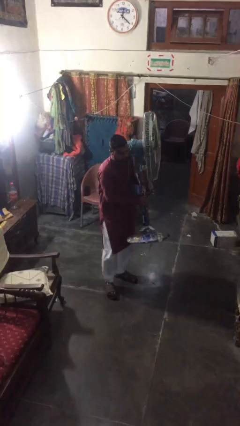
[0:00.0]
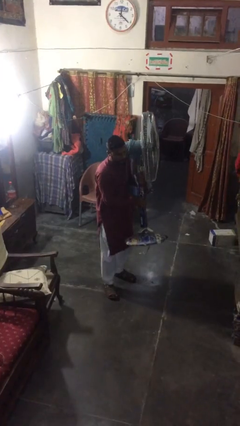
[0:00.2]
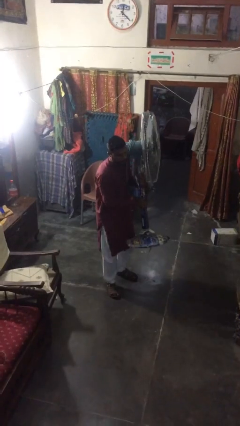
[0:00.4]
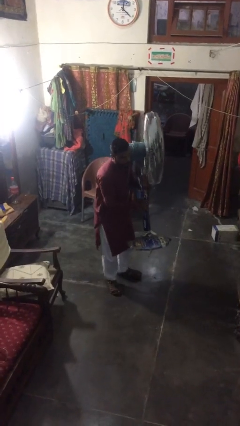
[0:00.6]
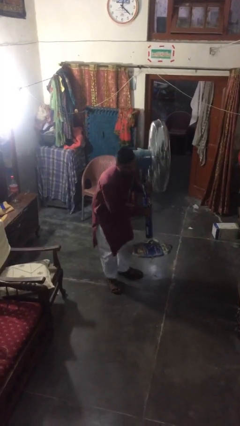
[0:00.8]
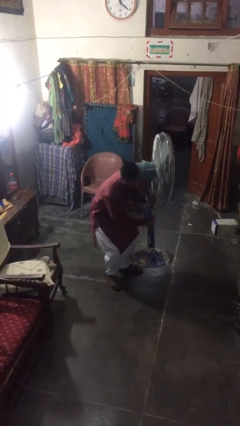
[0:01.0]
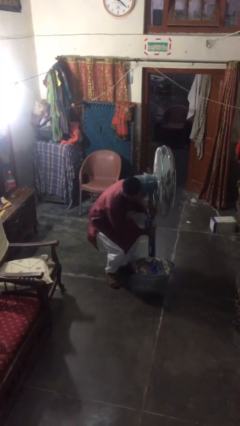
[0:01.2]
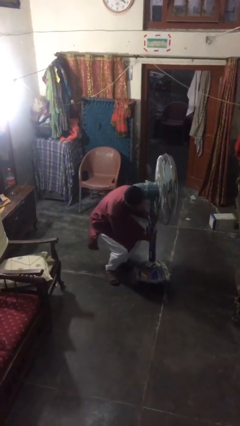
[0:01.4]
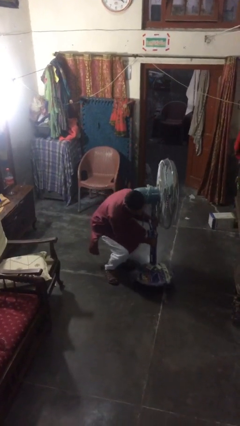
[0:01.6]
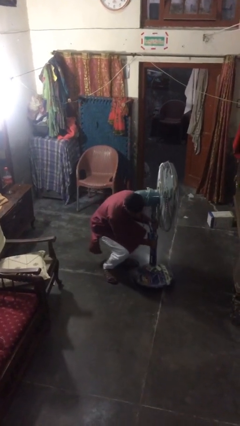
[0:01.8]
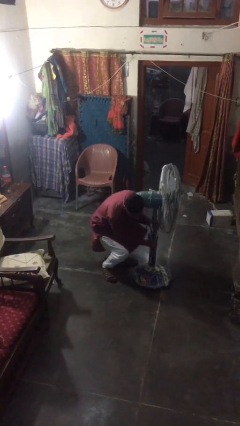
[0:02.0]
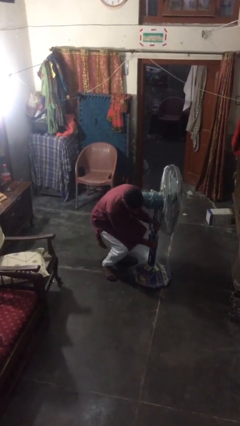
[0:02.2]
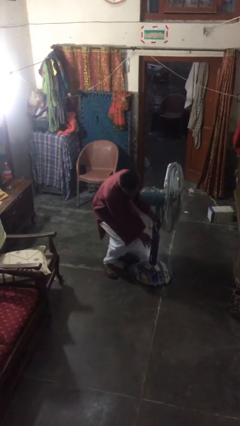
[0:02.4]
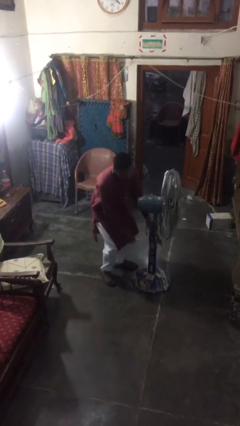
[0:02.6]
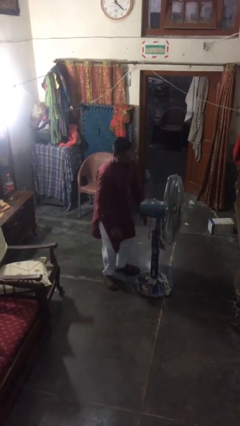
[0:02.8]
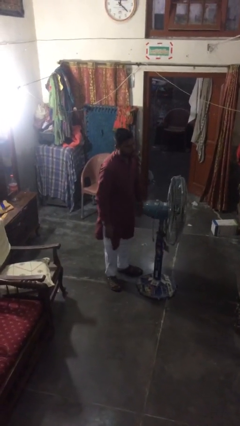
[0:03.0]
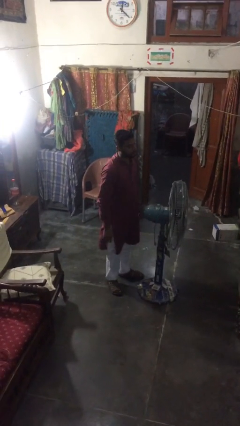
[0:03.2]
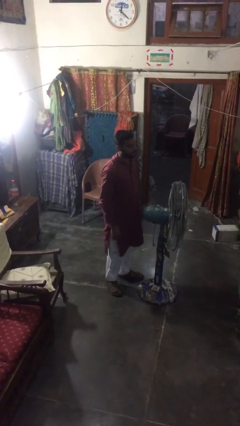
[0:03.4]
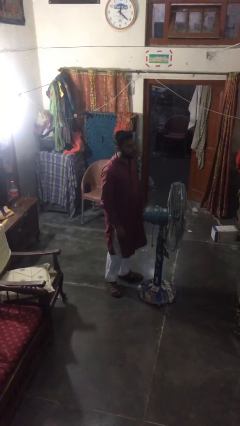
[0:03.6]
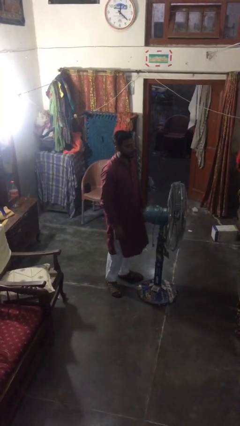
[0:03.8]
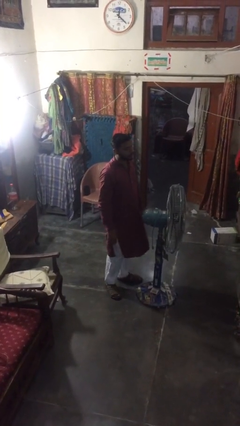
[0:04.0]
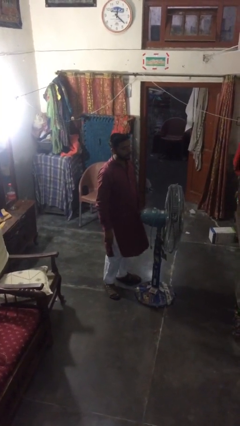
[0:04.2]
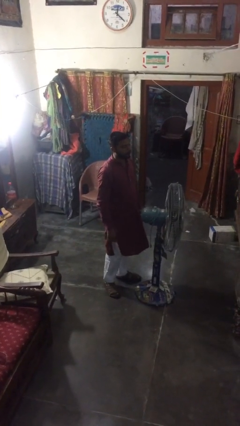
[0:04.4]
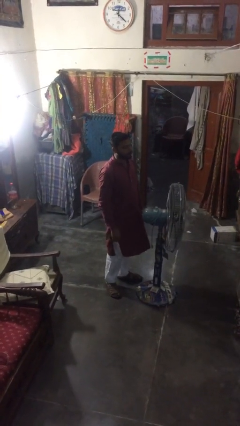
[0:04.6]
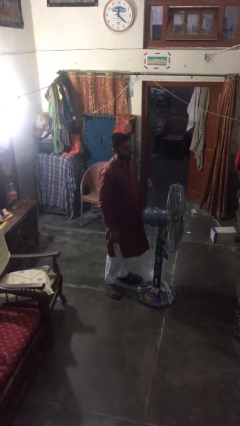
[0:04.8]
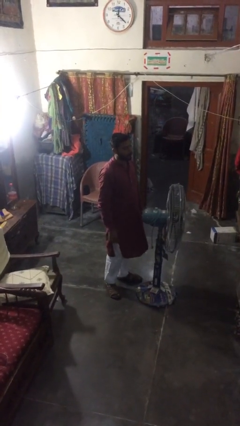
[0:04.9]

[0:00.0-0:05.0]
person puts down object on floor

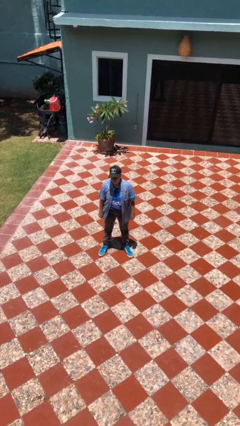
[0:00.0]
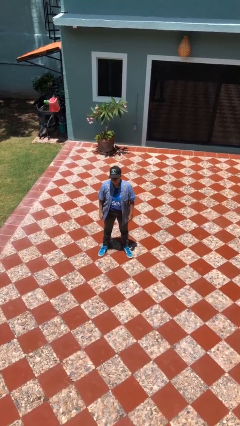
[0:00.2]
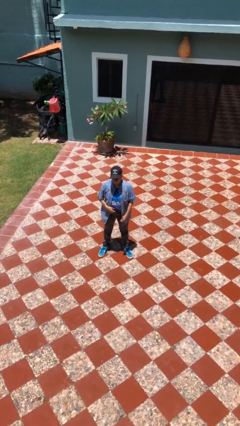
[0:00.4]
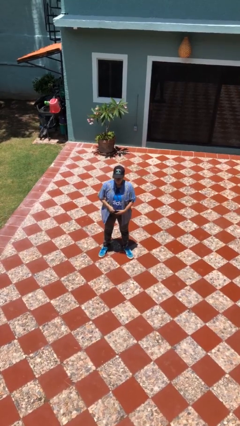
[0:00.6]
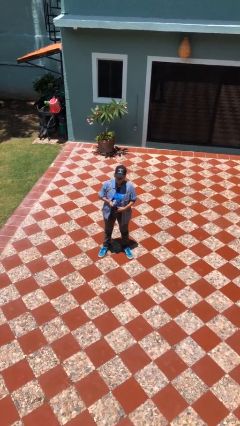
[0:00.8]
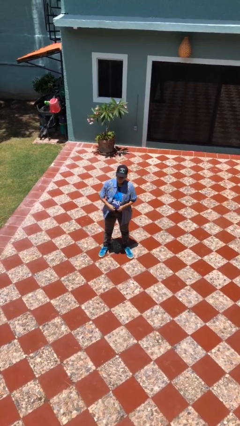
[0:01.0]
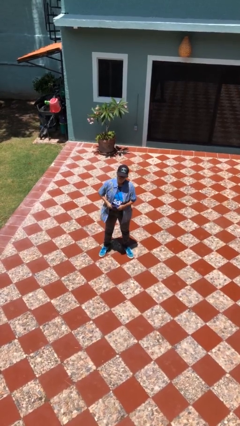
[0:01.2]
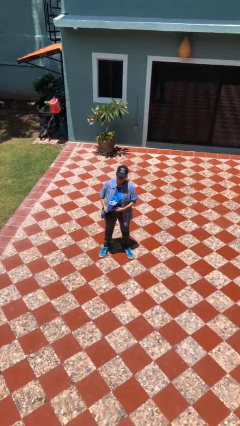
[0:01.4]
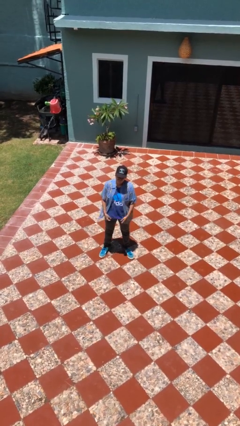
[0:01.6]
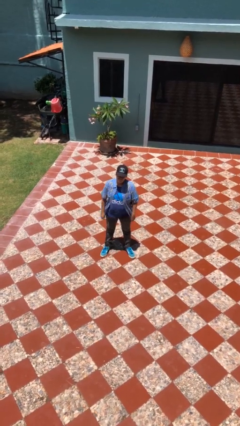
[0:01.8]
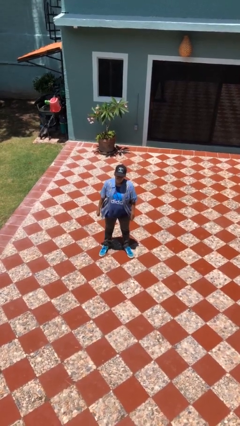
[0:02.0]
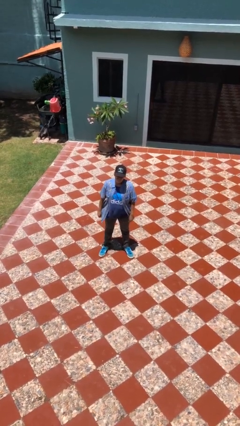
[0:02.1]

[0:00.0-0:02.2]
person untucks shirt

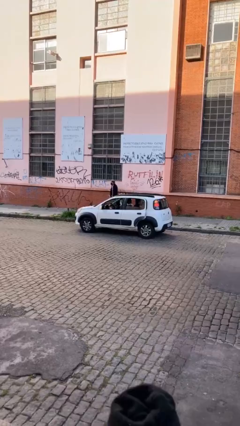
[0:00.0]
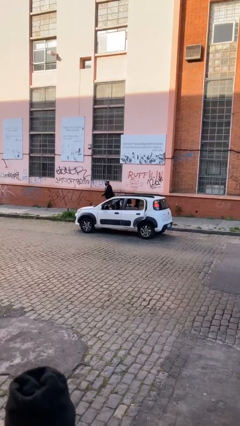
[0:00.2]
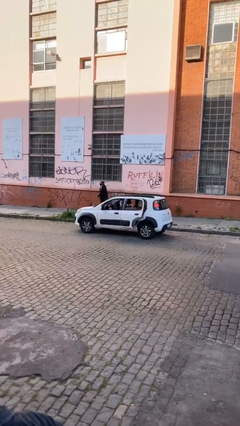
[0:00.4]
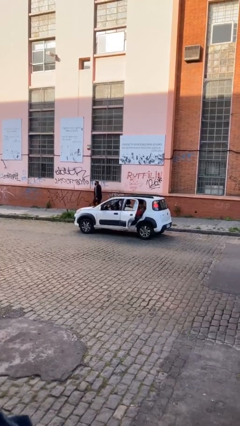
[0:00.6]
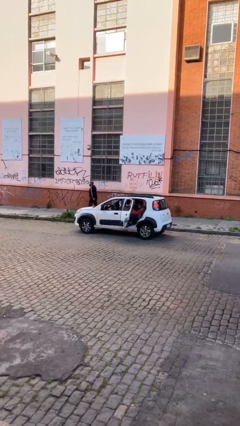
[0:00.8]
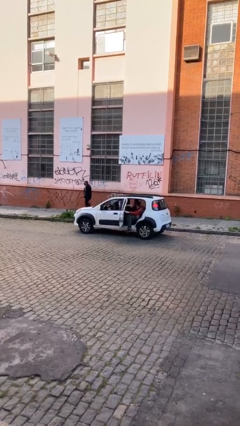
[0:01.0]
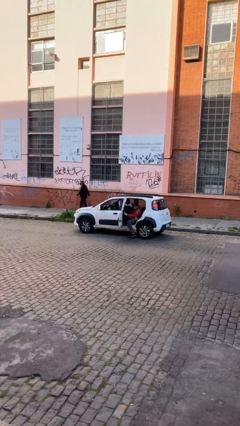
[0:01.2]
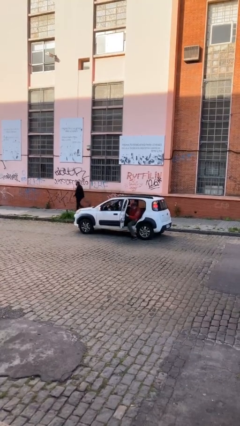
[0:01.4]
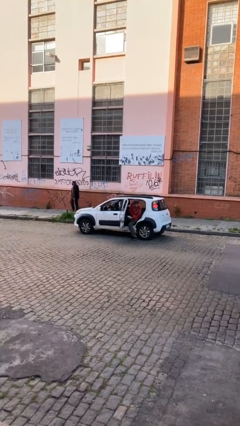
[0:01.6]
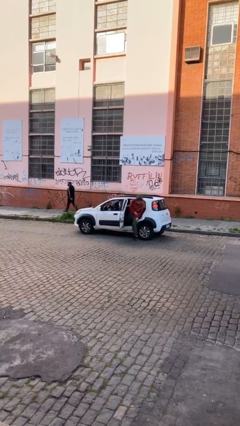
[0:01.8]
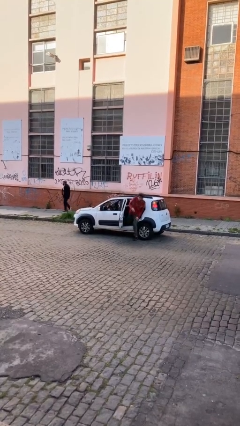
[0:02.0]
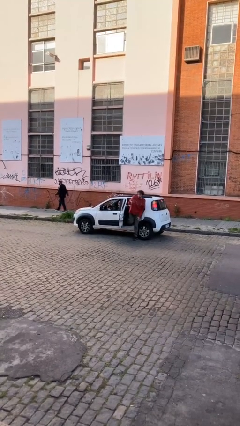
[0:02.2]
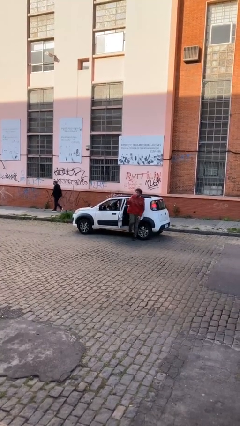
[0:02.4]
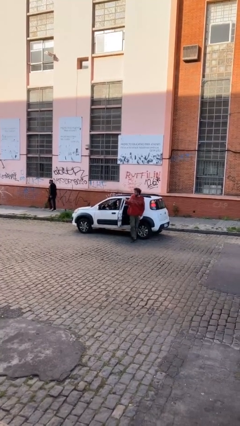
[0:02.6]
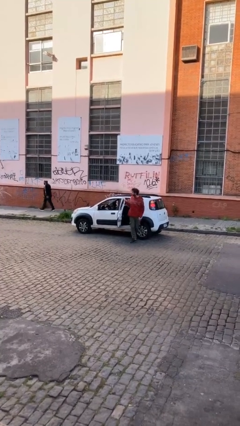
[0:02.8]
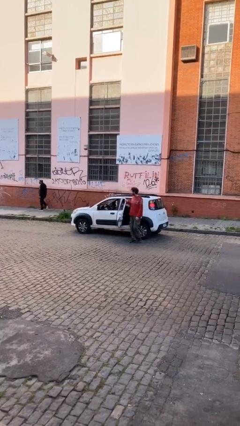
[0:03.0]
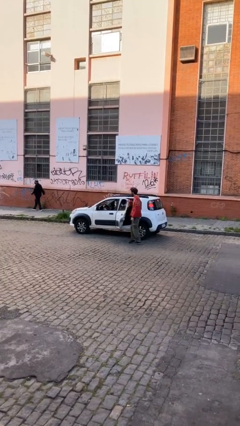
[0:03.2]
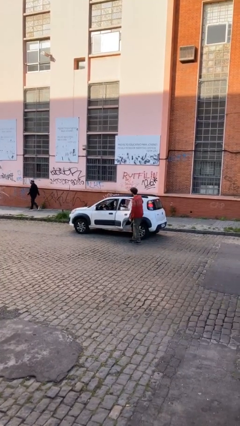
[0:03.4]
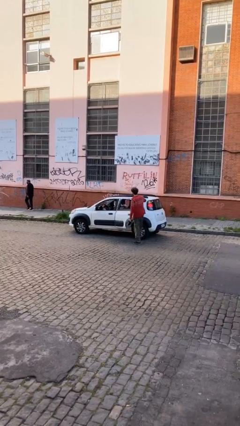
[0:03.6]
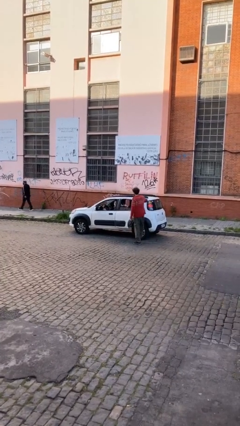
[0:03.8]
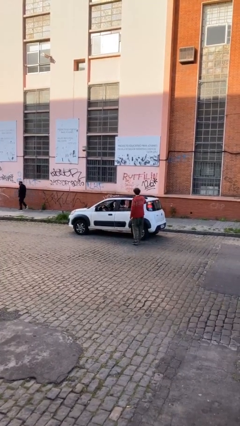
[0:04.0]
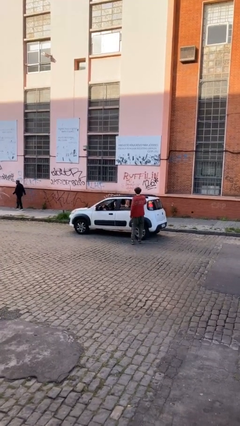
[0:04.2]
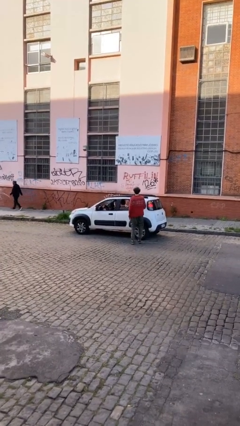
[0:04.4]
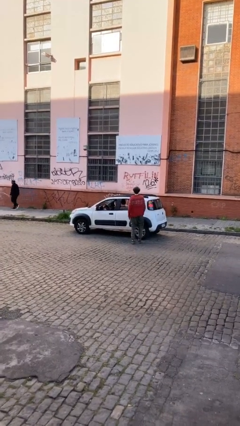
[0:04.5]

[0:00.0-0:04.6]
car drops off person

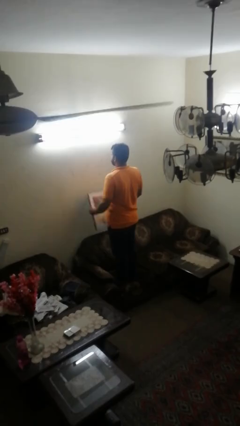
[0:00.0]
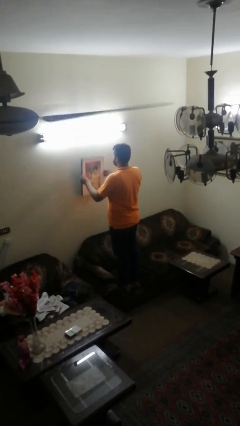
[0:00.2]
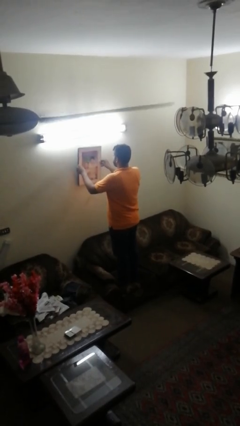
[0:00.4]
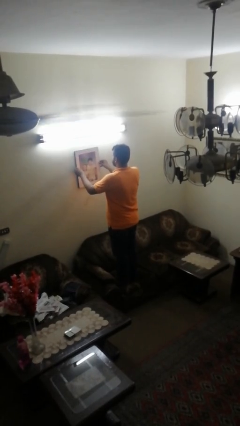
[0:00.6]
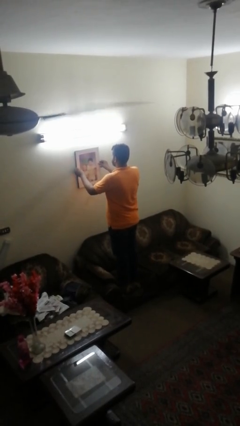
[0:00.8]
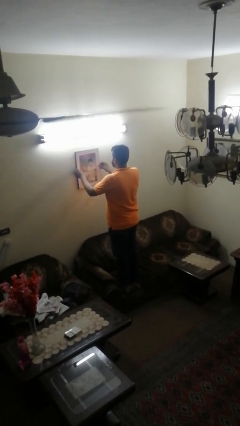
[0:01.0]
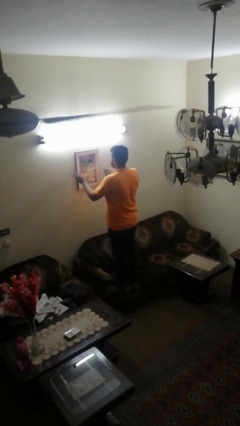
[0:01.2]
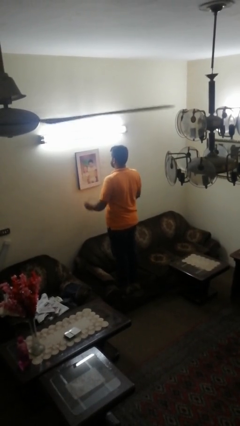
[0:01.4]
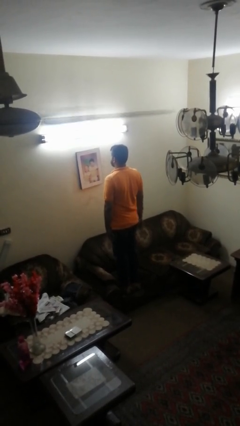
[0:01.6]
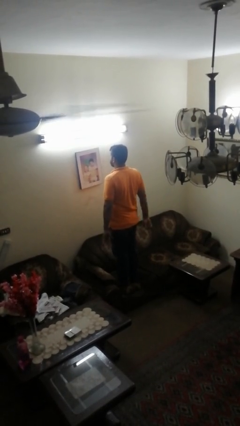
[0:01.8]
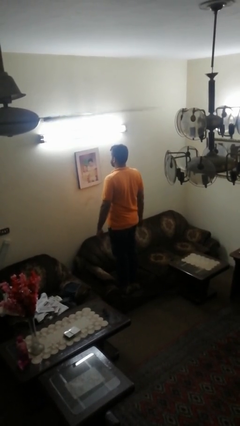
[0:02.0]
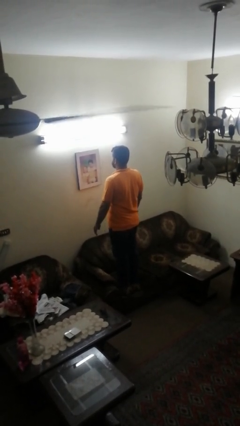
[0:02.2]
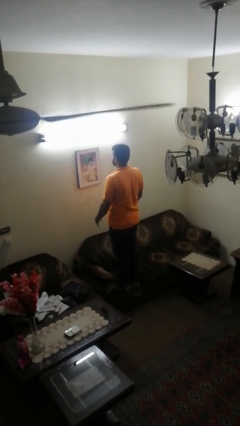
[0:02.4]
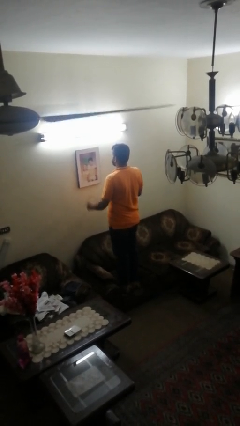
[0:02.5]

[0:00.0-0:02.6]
person puts up picture frame

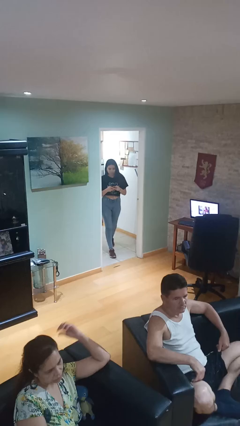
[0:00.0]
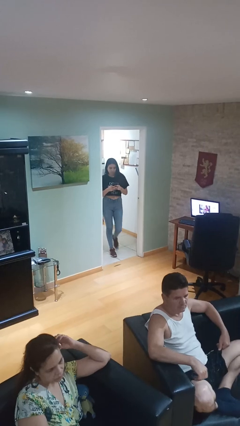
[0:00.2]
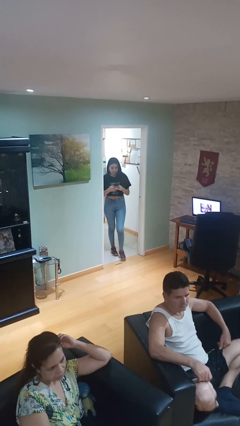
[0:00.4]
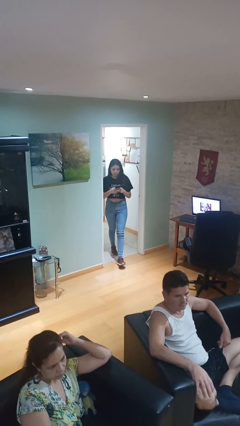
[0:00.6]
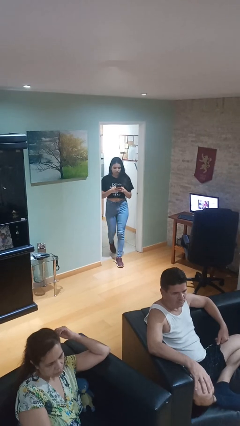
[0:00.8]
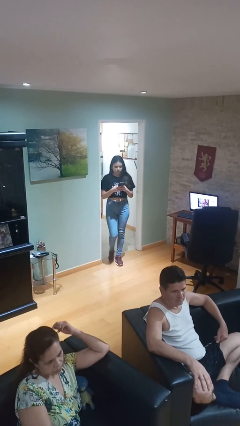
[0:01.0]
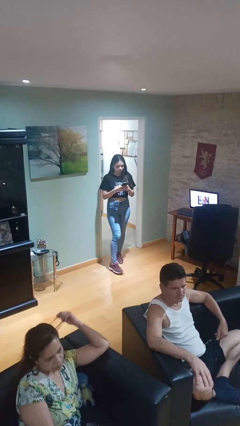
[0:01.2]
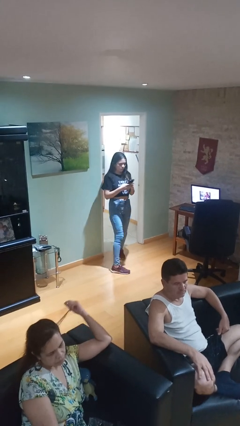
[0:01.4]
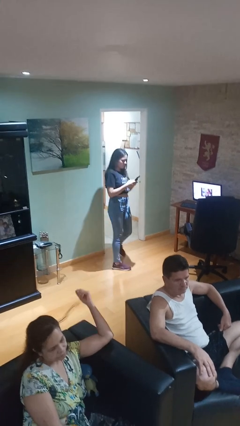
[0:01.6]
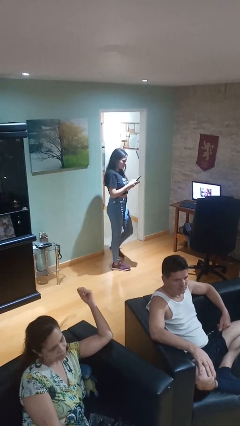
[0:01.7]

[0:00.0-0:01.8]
person enters scene through structure

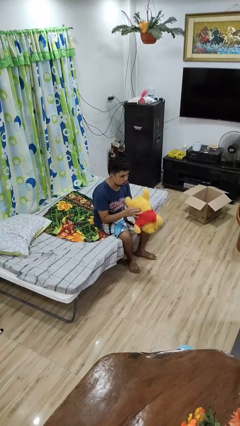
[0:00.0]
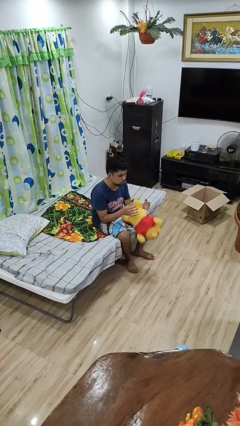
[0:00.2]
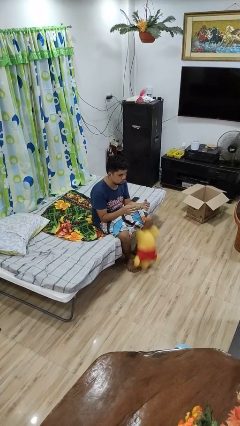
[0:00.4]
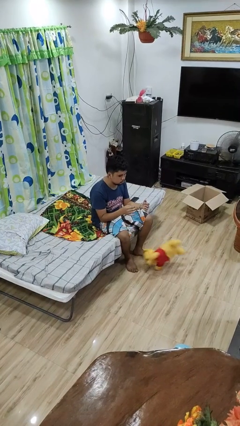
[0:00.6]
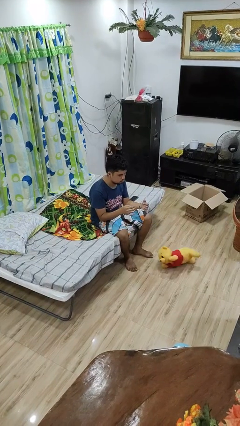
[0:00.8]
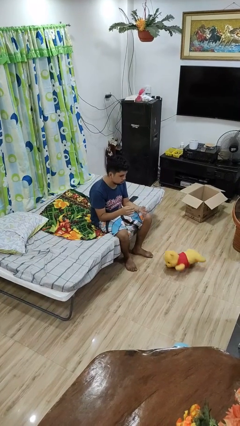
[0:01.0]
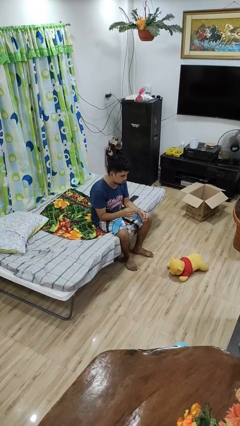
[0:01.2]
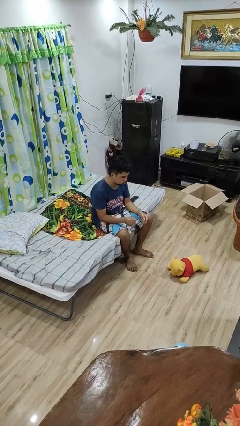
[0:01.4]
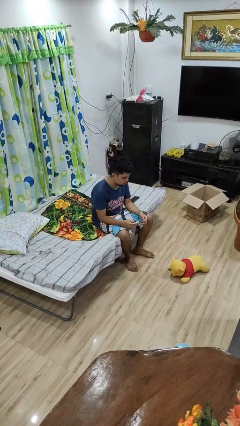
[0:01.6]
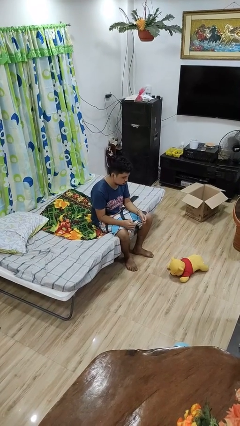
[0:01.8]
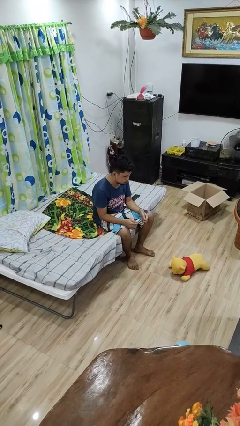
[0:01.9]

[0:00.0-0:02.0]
person drops object
